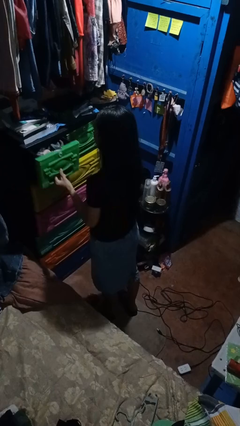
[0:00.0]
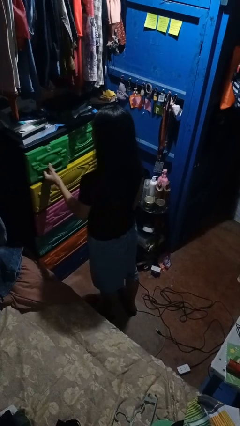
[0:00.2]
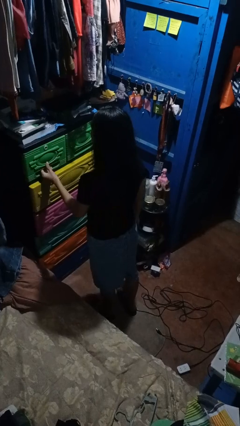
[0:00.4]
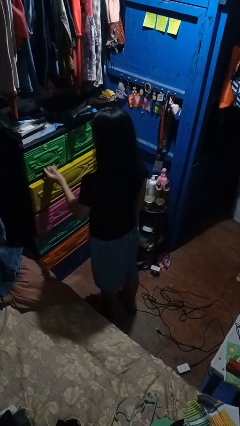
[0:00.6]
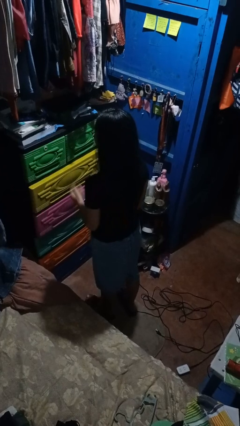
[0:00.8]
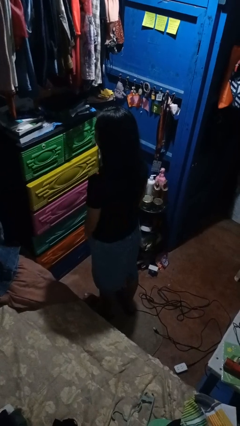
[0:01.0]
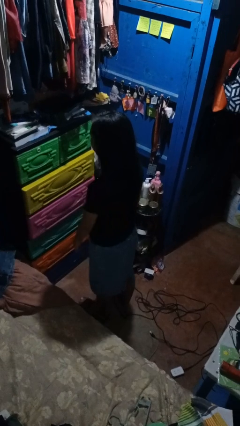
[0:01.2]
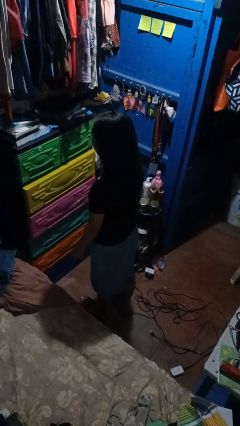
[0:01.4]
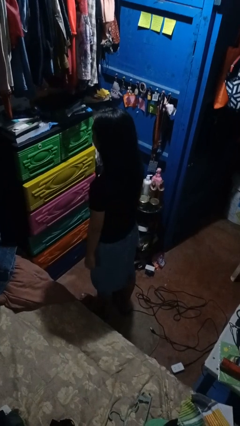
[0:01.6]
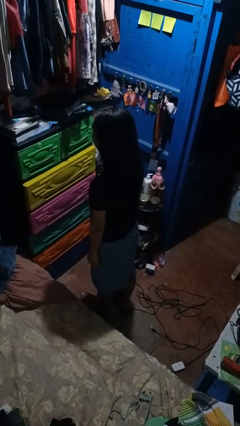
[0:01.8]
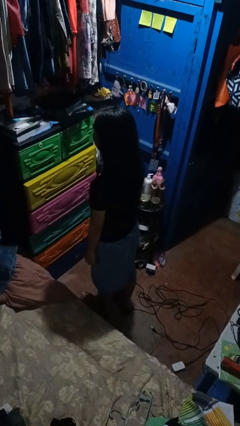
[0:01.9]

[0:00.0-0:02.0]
person closes dresser drawer

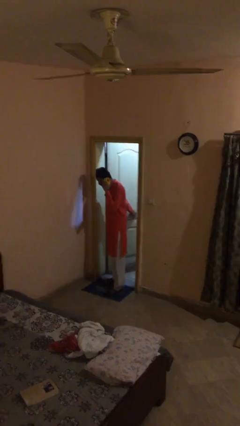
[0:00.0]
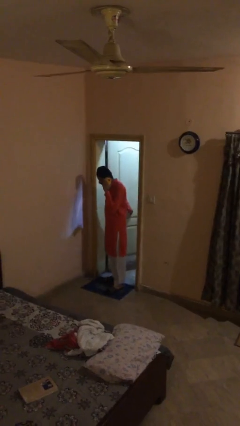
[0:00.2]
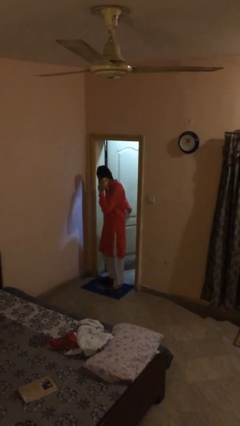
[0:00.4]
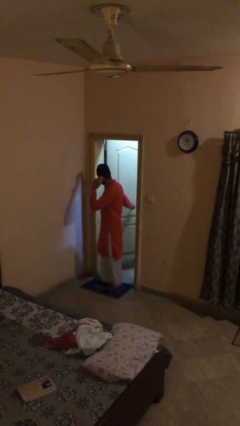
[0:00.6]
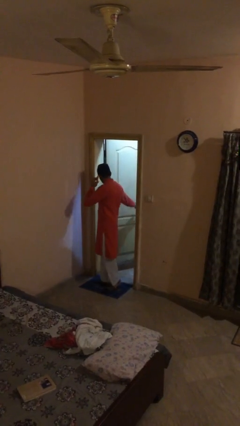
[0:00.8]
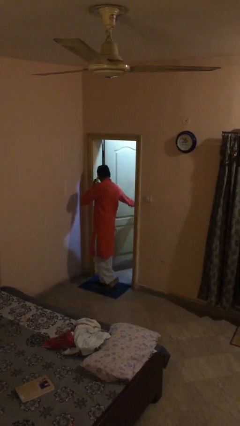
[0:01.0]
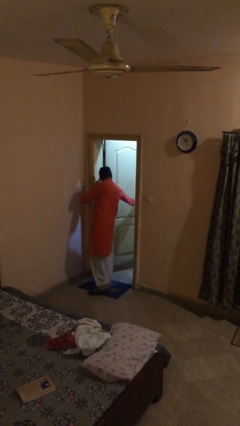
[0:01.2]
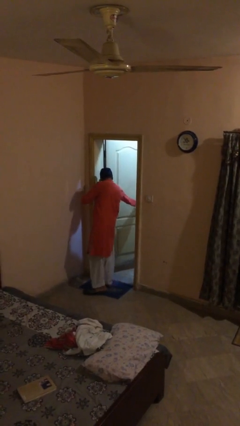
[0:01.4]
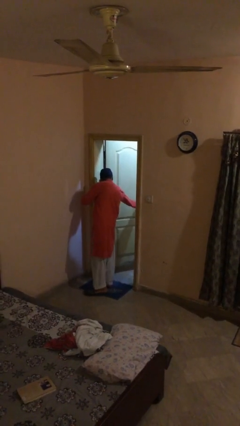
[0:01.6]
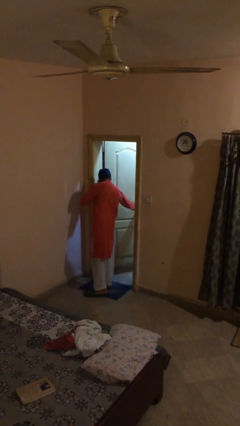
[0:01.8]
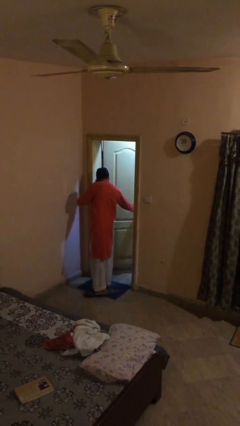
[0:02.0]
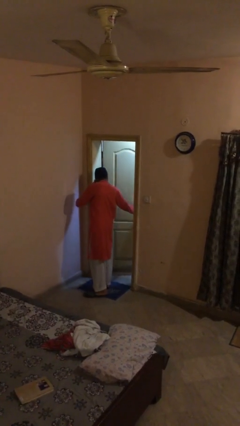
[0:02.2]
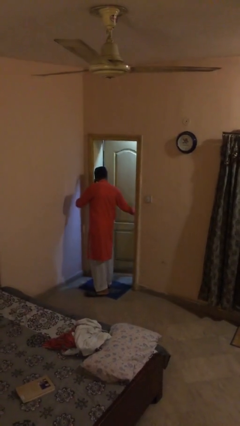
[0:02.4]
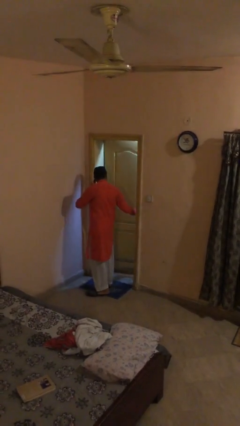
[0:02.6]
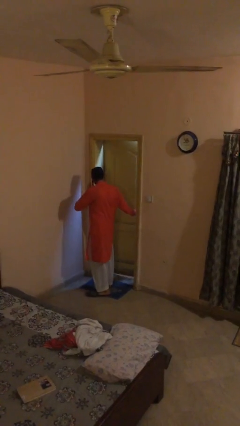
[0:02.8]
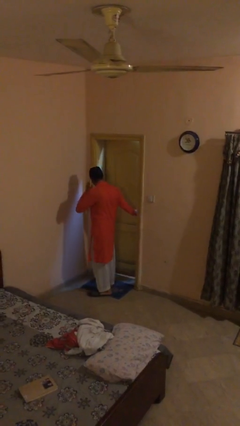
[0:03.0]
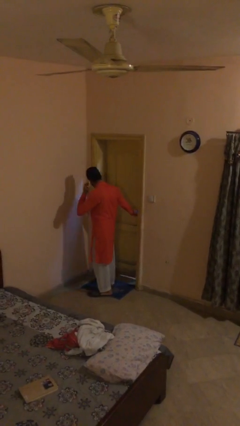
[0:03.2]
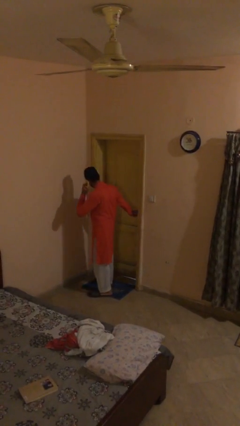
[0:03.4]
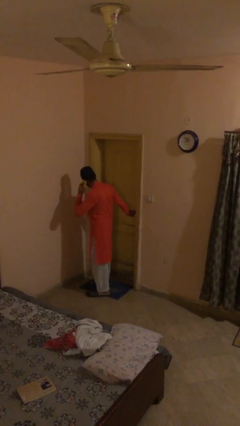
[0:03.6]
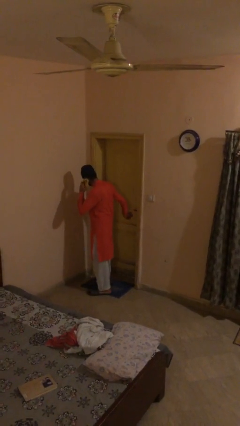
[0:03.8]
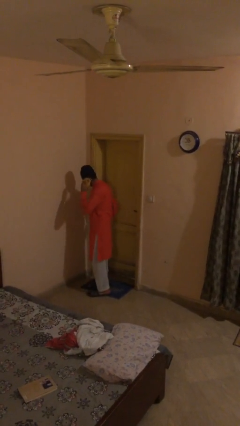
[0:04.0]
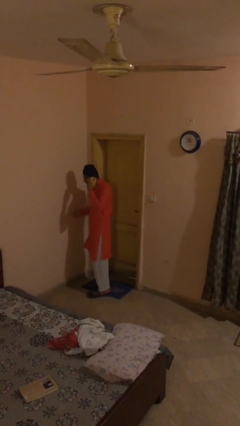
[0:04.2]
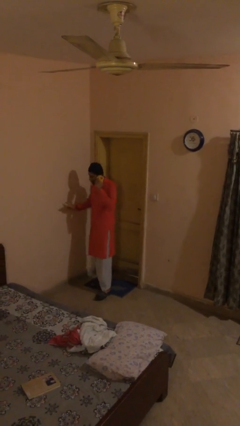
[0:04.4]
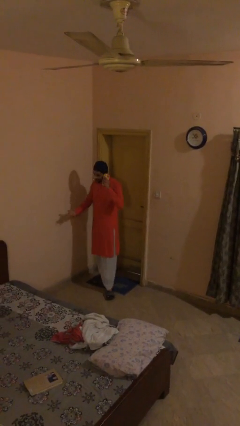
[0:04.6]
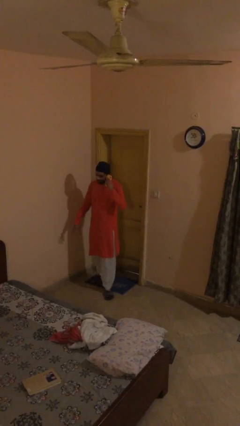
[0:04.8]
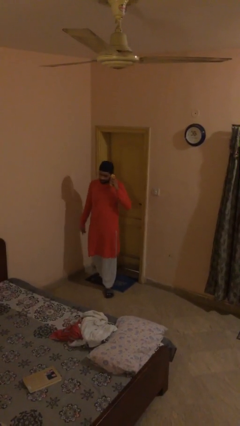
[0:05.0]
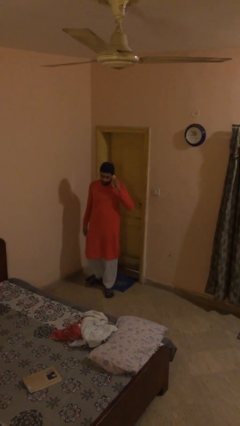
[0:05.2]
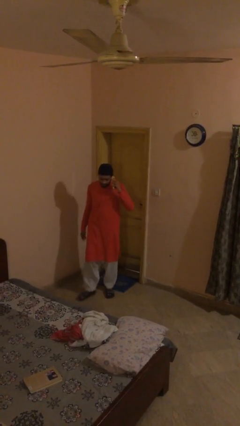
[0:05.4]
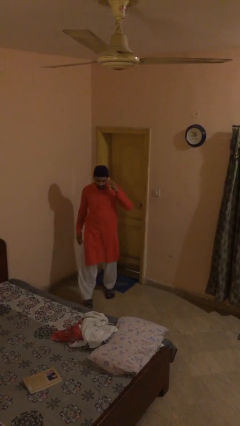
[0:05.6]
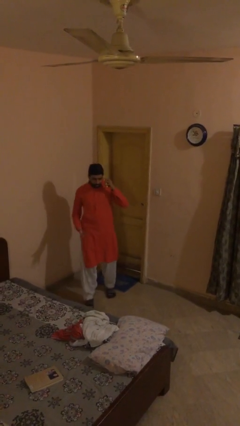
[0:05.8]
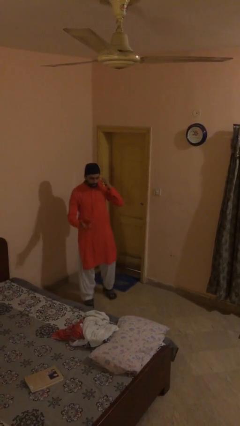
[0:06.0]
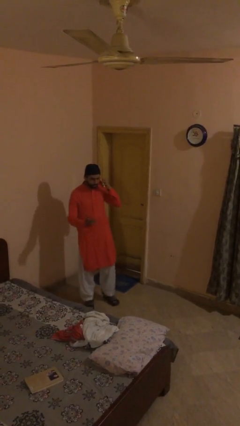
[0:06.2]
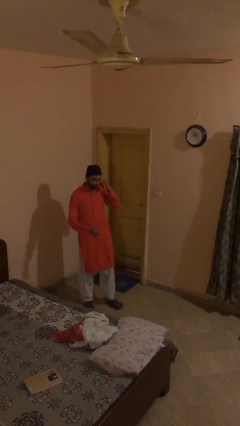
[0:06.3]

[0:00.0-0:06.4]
person closes facility door

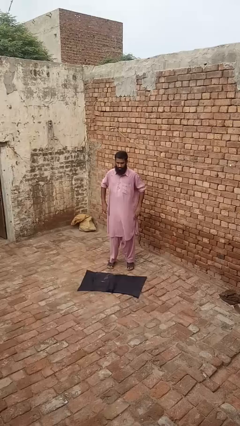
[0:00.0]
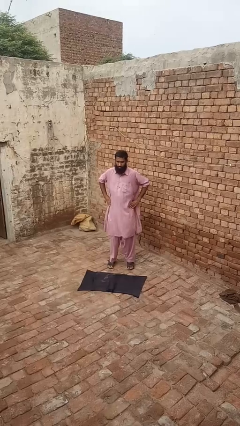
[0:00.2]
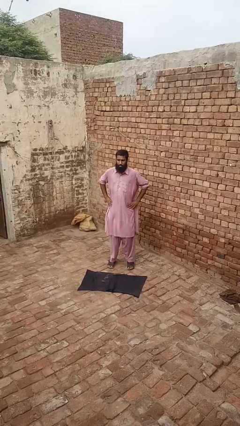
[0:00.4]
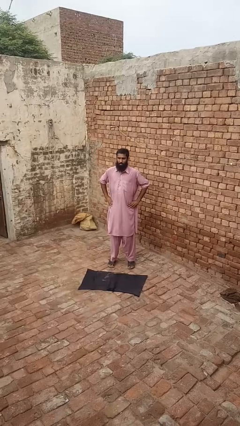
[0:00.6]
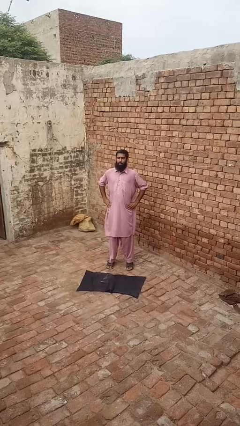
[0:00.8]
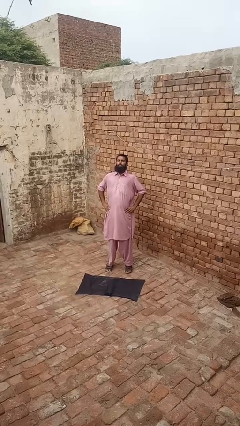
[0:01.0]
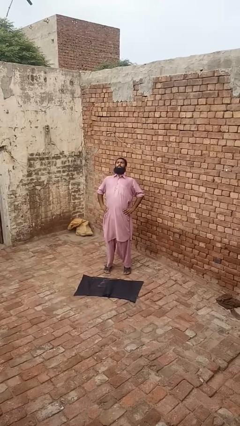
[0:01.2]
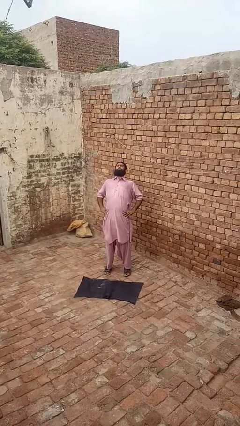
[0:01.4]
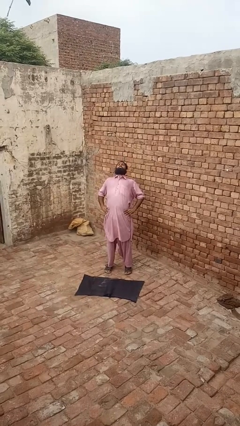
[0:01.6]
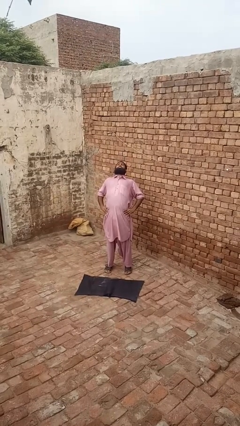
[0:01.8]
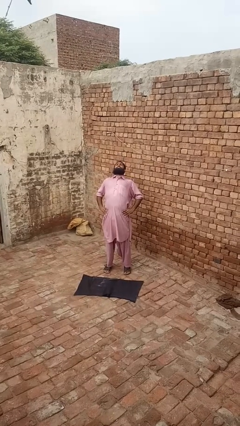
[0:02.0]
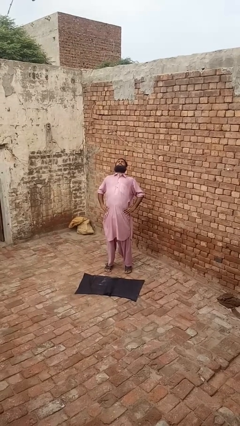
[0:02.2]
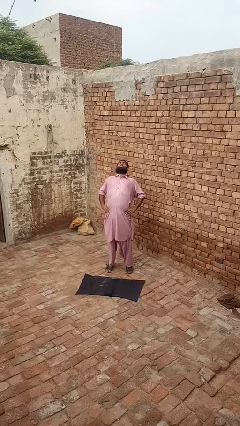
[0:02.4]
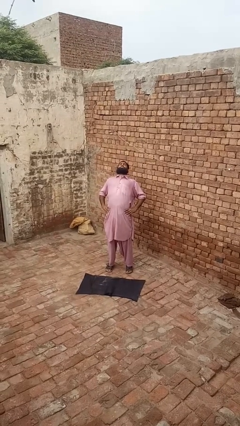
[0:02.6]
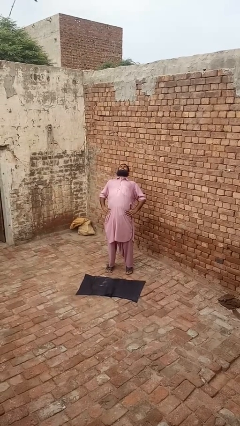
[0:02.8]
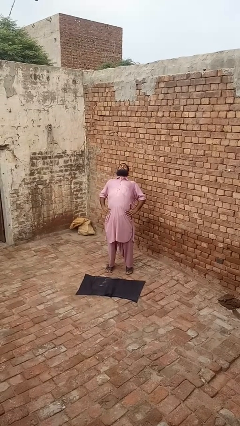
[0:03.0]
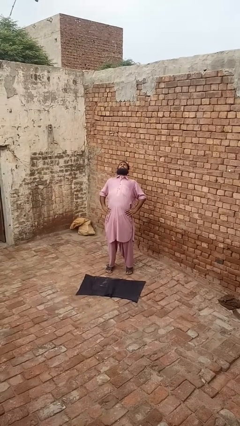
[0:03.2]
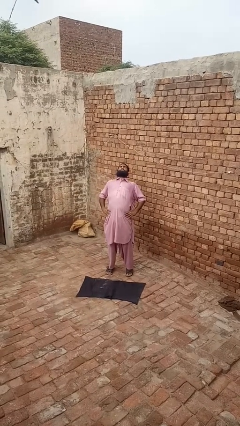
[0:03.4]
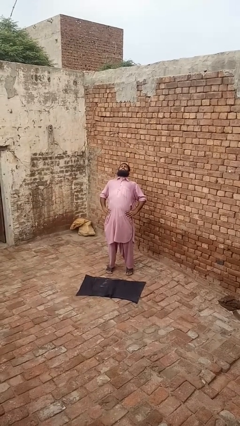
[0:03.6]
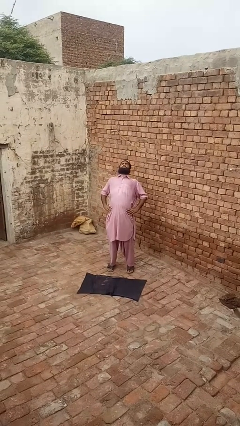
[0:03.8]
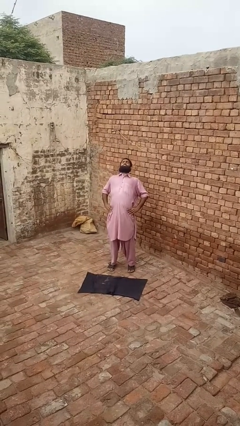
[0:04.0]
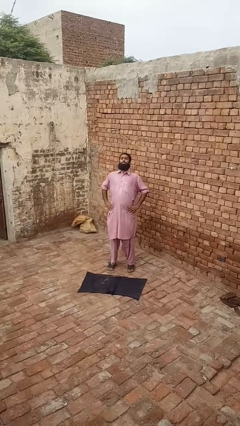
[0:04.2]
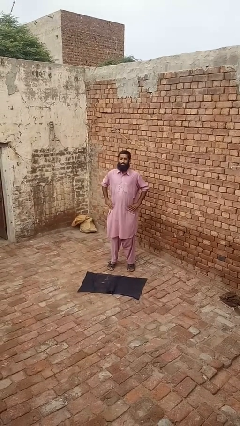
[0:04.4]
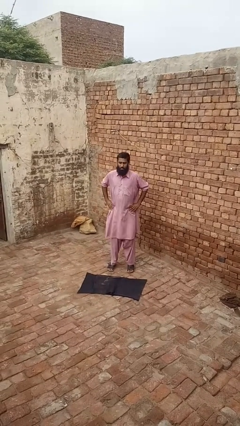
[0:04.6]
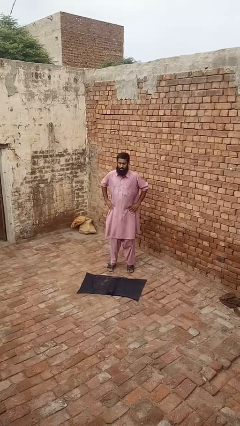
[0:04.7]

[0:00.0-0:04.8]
person stretches back

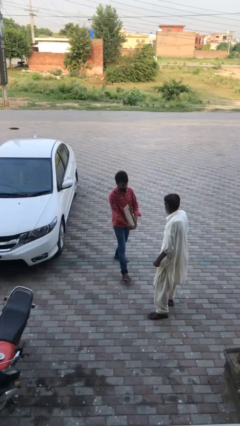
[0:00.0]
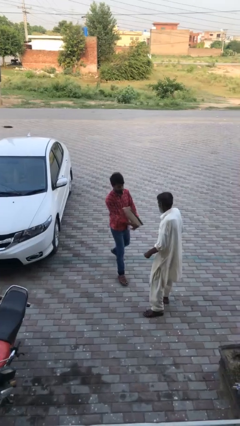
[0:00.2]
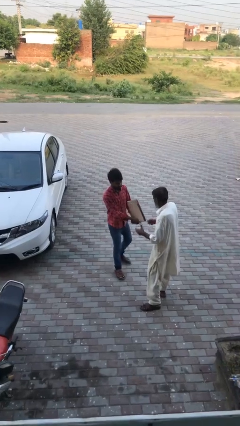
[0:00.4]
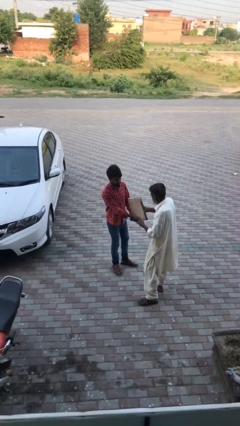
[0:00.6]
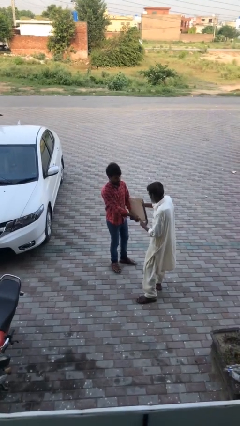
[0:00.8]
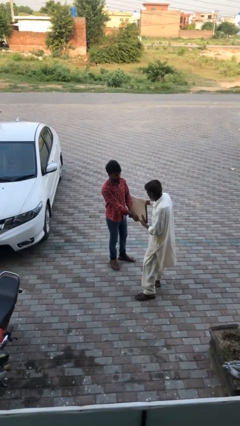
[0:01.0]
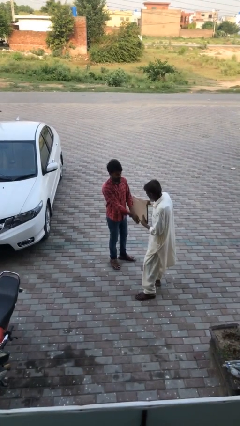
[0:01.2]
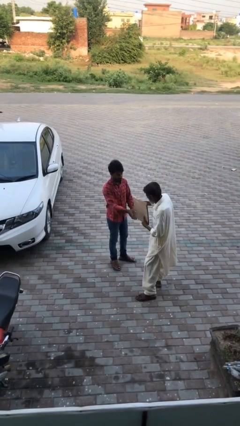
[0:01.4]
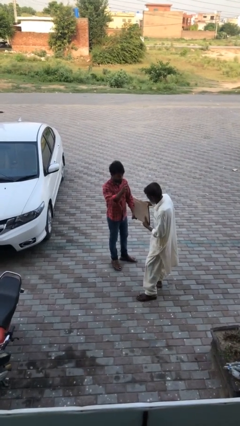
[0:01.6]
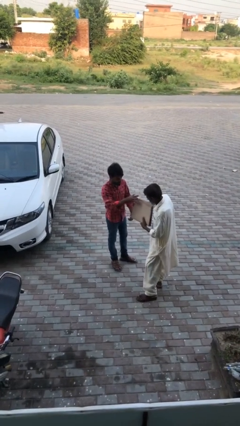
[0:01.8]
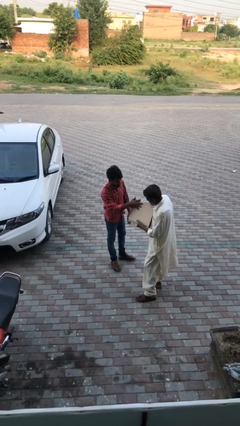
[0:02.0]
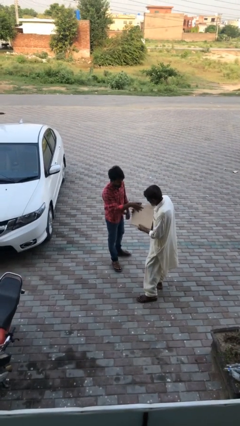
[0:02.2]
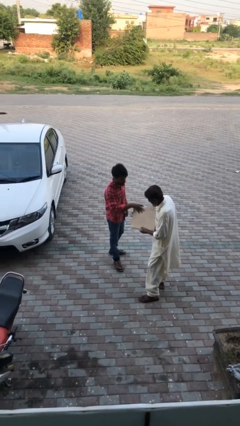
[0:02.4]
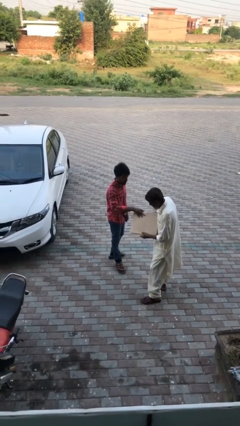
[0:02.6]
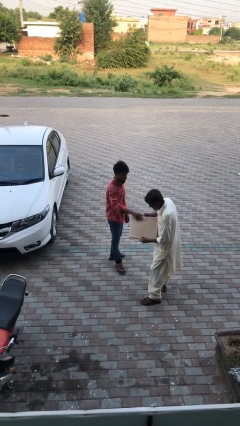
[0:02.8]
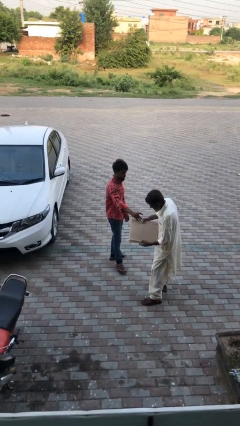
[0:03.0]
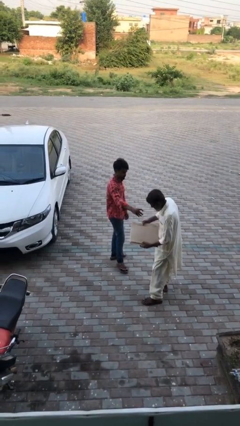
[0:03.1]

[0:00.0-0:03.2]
person transfers object to person

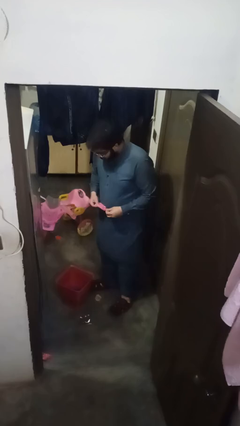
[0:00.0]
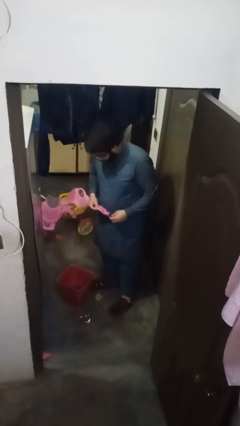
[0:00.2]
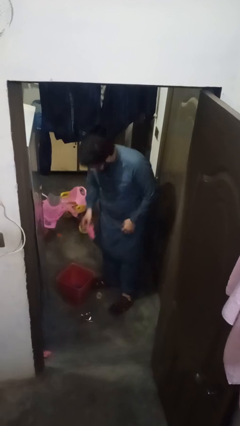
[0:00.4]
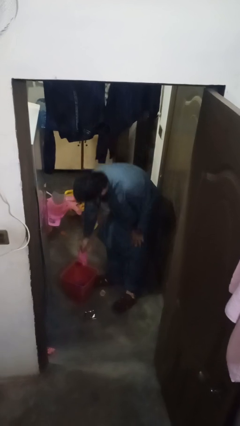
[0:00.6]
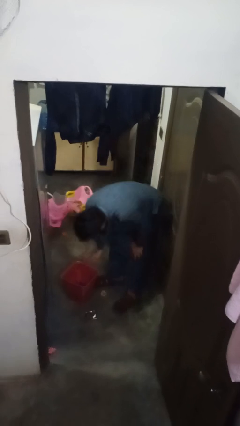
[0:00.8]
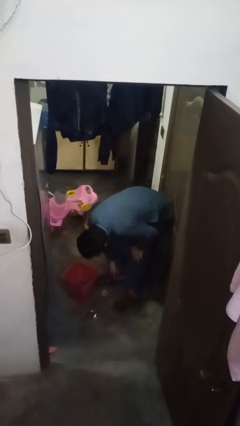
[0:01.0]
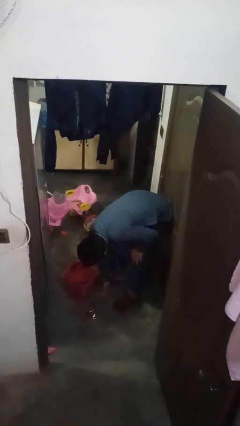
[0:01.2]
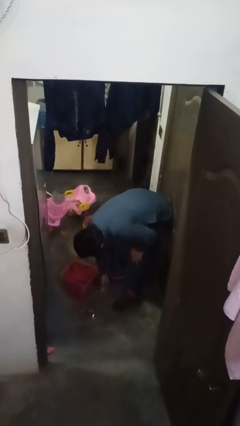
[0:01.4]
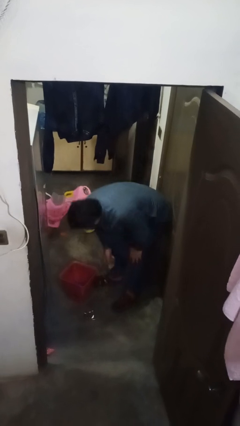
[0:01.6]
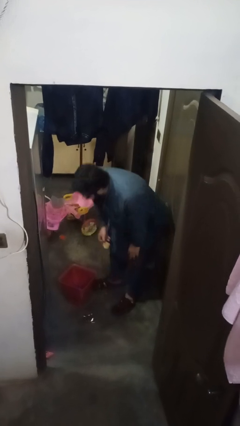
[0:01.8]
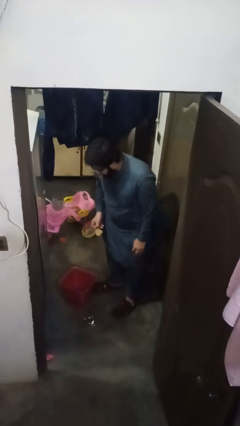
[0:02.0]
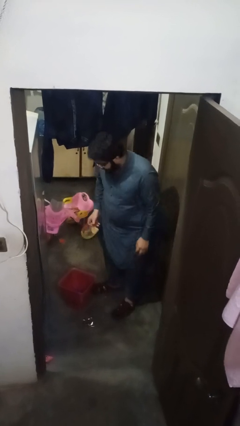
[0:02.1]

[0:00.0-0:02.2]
person discards trash
